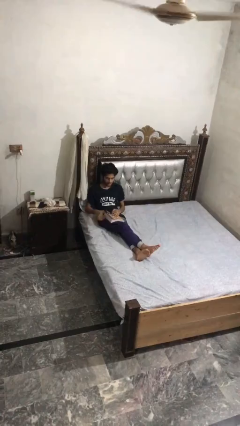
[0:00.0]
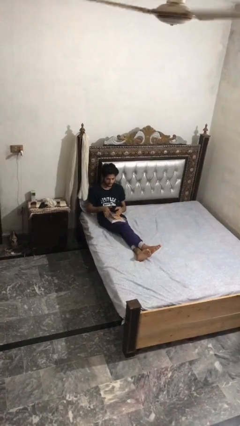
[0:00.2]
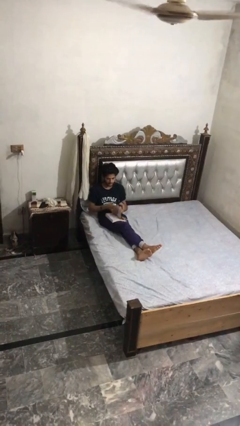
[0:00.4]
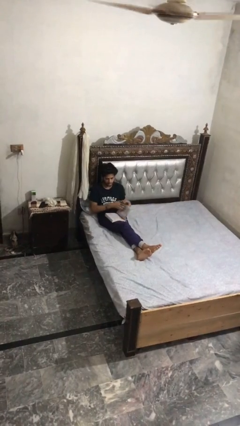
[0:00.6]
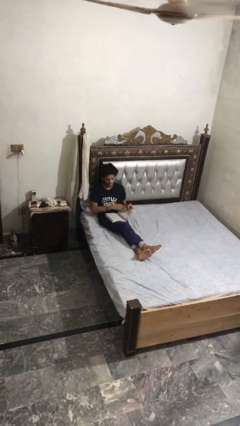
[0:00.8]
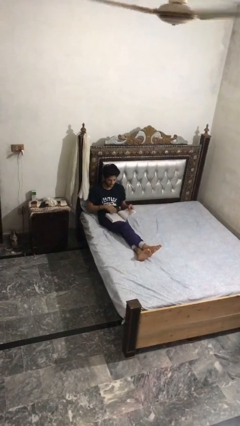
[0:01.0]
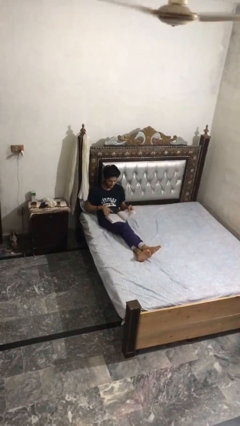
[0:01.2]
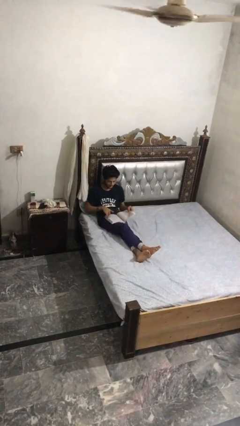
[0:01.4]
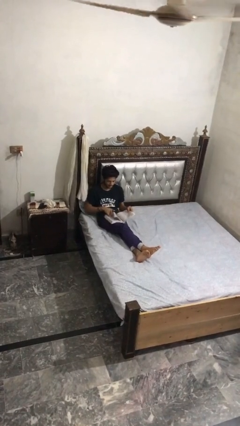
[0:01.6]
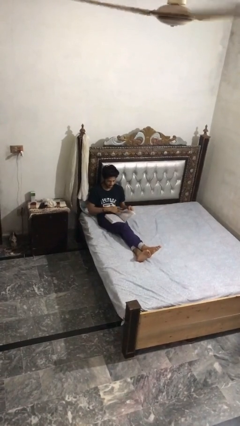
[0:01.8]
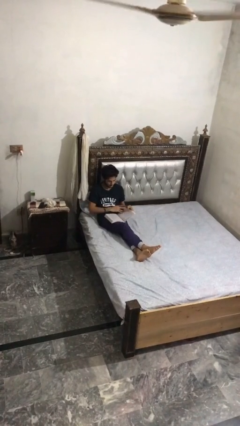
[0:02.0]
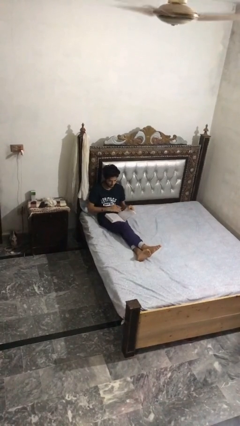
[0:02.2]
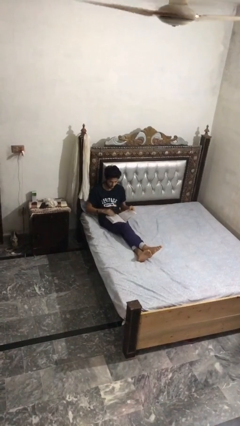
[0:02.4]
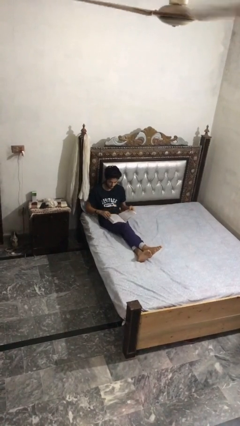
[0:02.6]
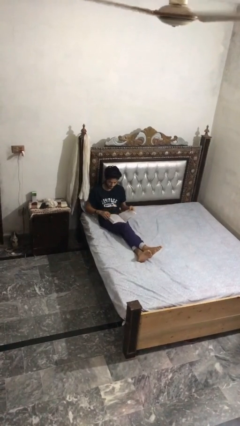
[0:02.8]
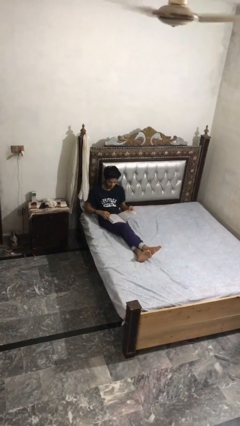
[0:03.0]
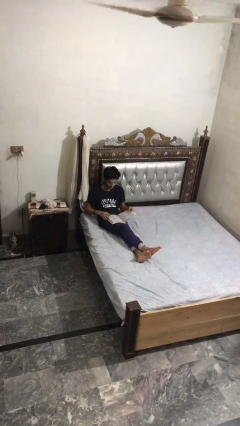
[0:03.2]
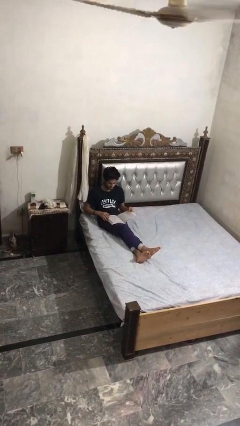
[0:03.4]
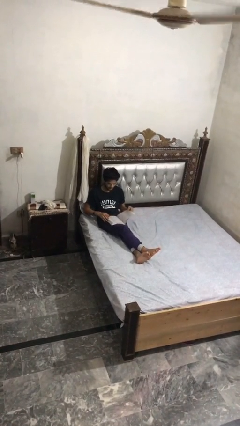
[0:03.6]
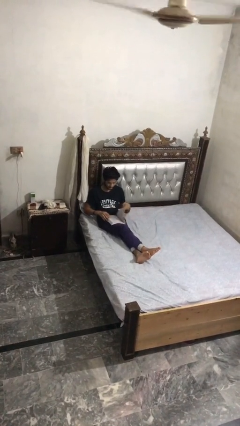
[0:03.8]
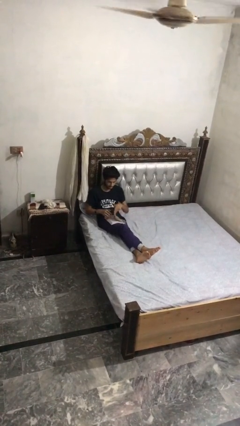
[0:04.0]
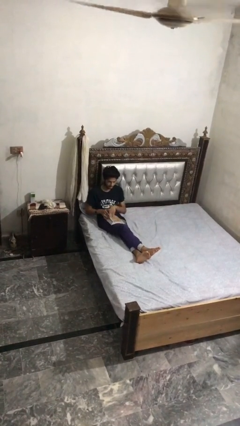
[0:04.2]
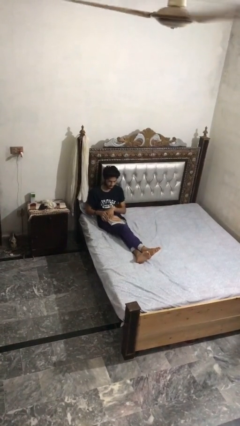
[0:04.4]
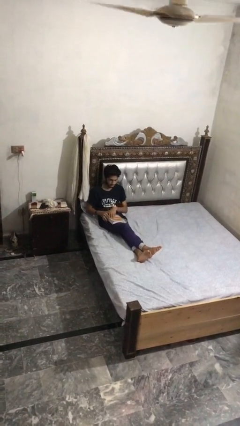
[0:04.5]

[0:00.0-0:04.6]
person reads book

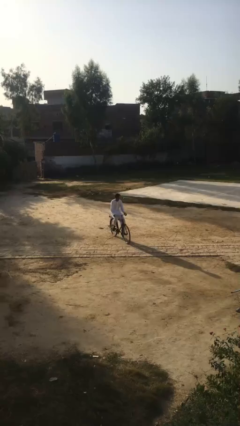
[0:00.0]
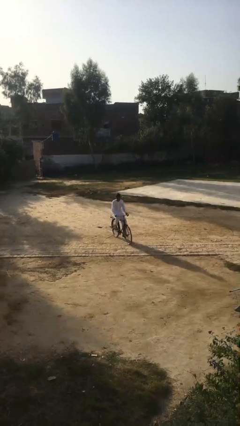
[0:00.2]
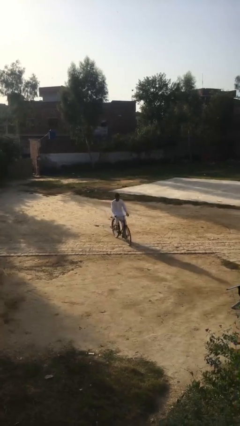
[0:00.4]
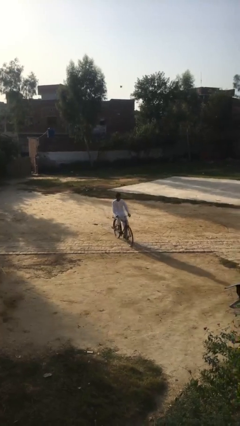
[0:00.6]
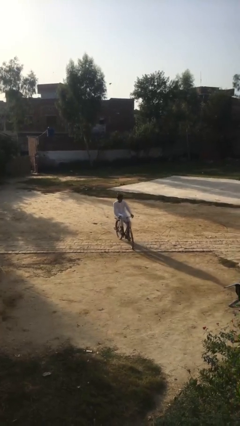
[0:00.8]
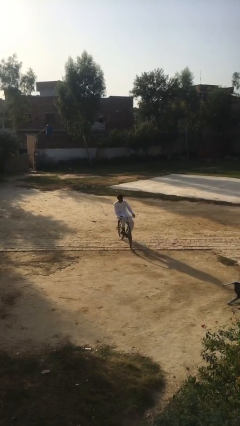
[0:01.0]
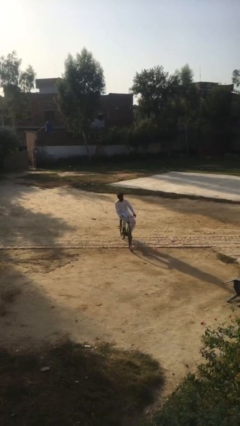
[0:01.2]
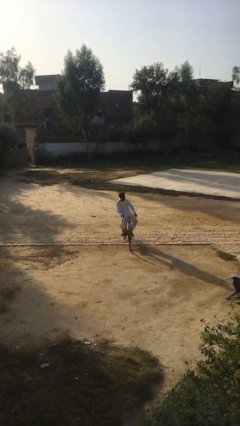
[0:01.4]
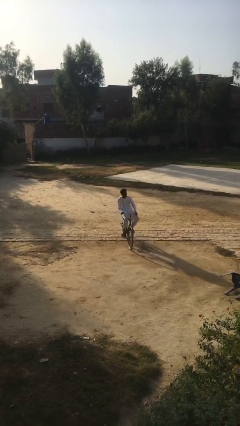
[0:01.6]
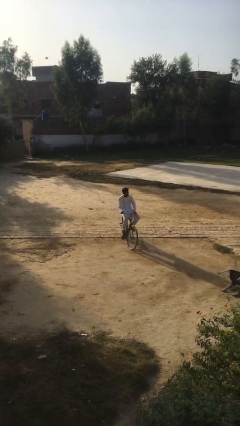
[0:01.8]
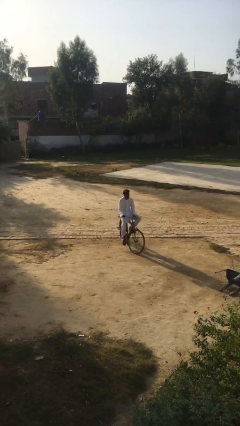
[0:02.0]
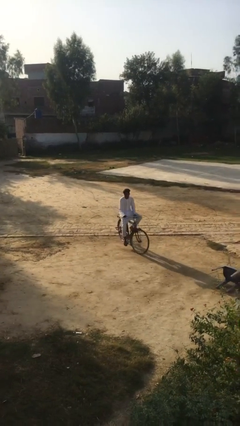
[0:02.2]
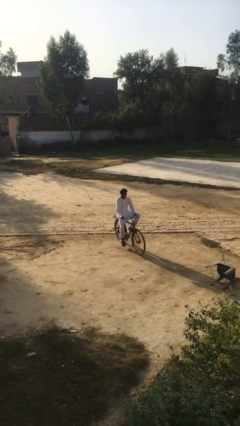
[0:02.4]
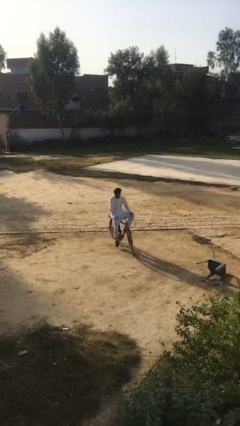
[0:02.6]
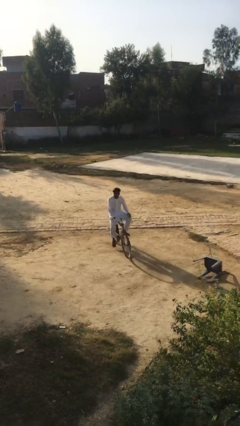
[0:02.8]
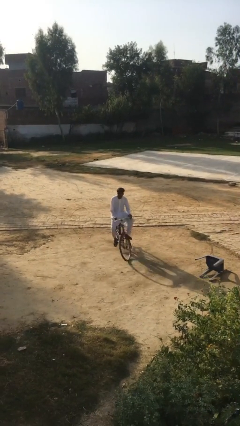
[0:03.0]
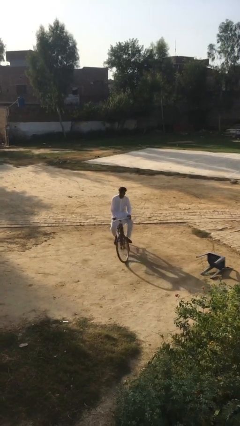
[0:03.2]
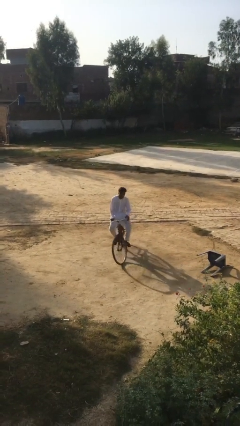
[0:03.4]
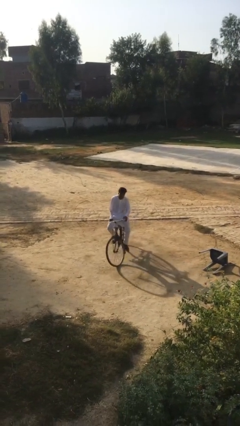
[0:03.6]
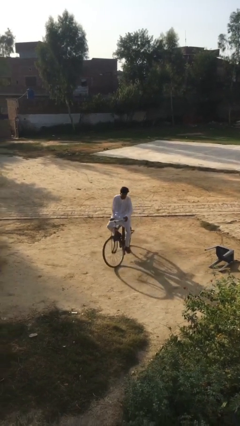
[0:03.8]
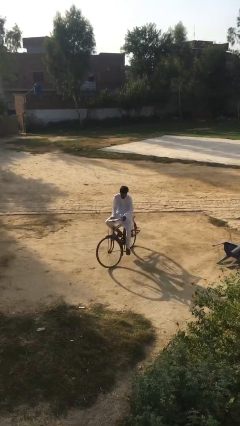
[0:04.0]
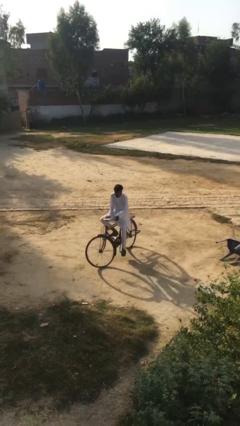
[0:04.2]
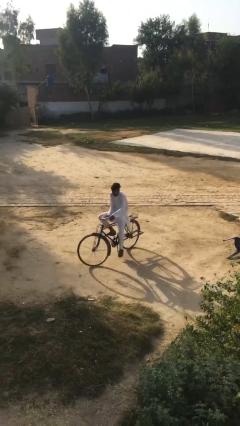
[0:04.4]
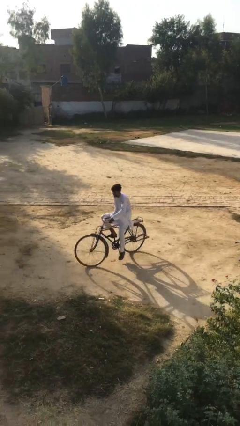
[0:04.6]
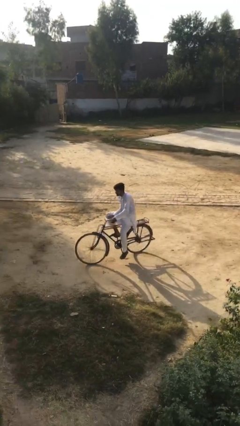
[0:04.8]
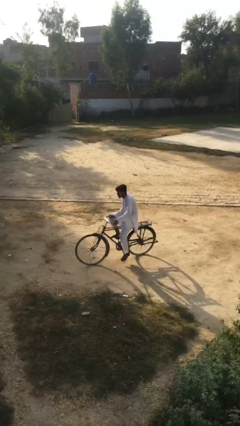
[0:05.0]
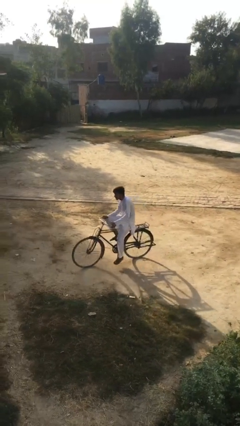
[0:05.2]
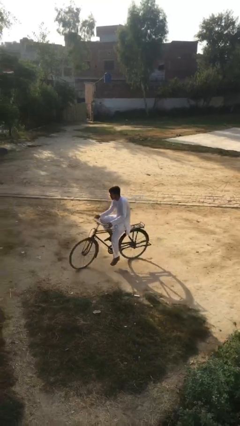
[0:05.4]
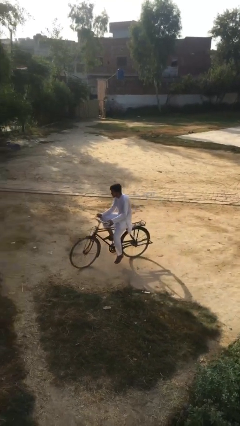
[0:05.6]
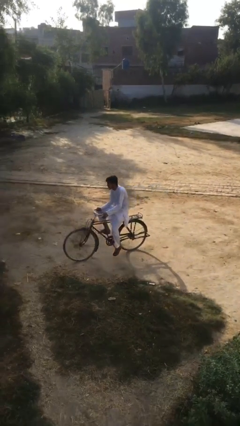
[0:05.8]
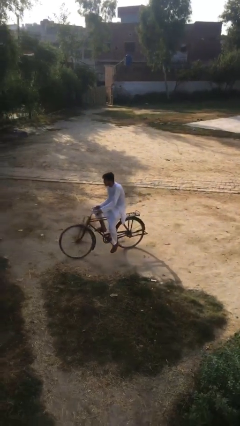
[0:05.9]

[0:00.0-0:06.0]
person rides bicycle

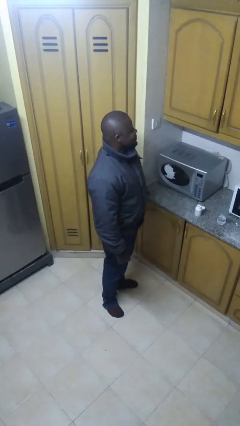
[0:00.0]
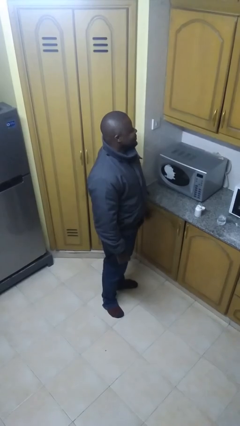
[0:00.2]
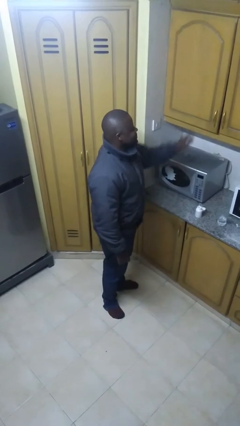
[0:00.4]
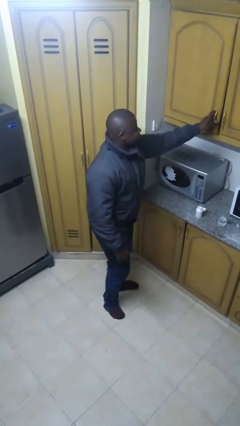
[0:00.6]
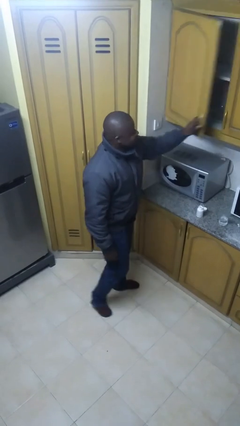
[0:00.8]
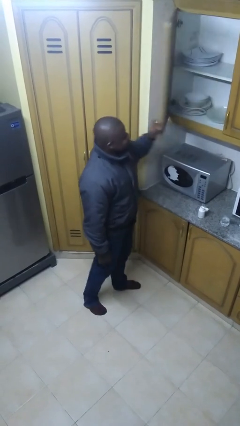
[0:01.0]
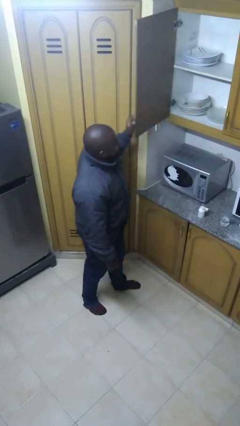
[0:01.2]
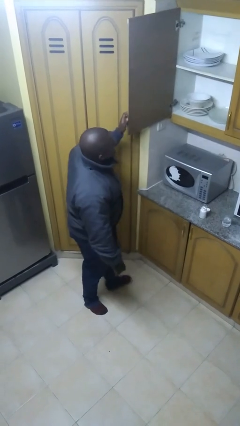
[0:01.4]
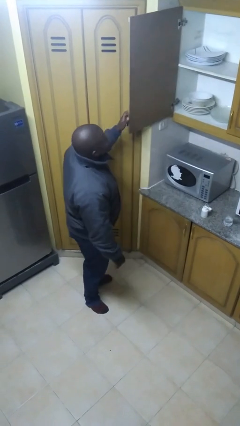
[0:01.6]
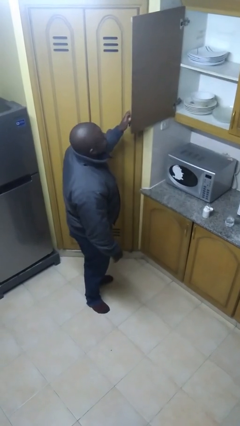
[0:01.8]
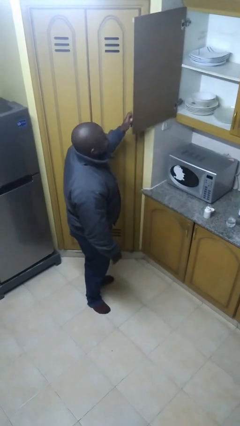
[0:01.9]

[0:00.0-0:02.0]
person closes cabinet

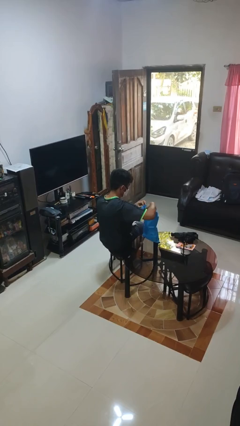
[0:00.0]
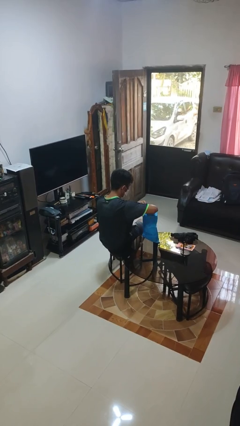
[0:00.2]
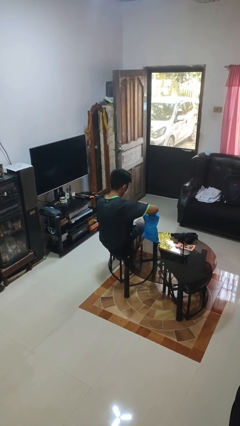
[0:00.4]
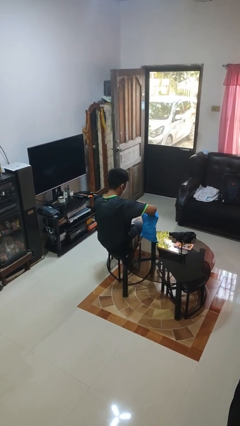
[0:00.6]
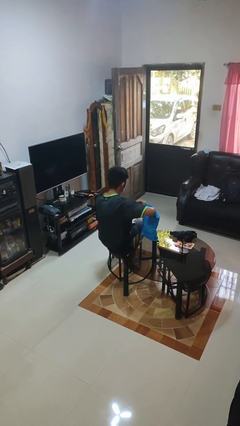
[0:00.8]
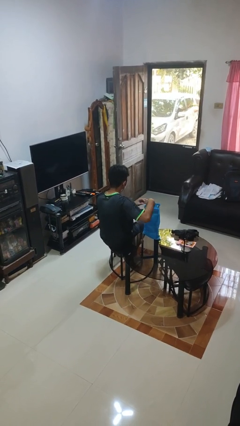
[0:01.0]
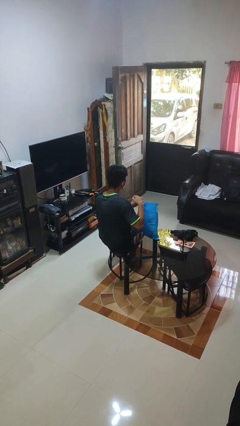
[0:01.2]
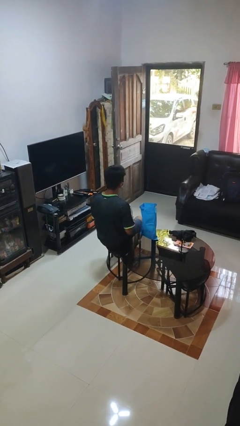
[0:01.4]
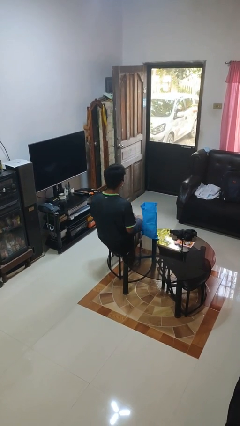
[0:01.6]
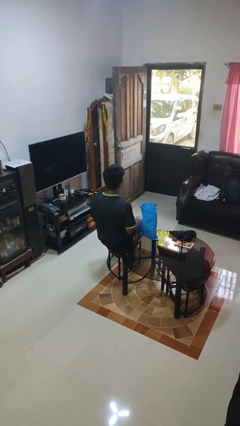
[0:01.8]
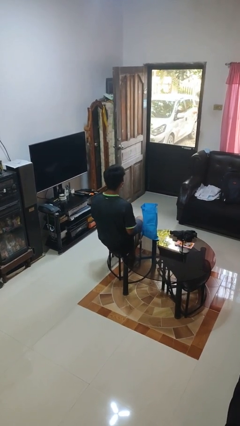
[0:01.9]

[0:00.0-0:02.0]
person puts object into bag

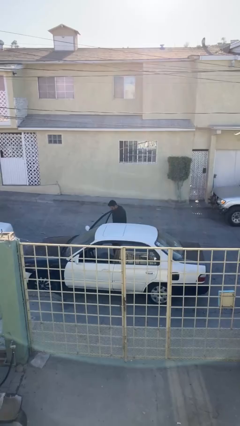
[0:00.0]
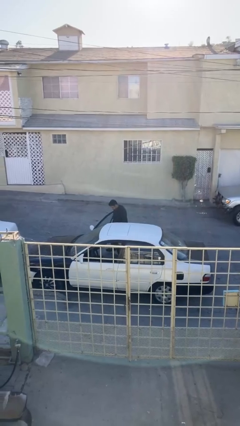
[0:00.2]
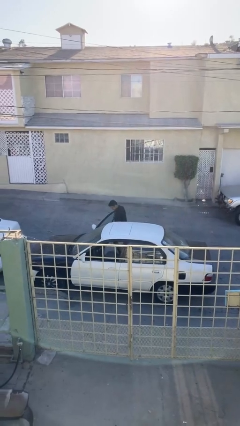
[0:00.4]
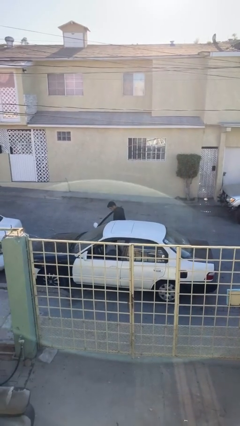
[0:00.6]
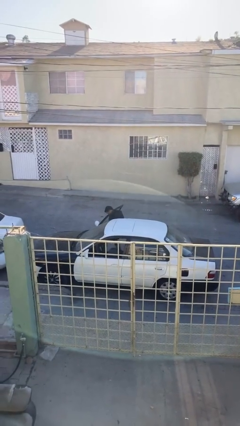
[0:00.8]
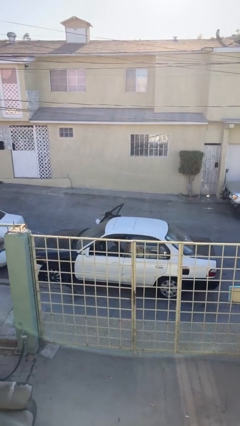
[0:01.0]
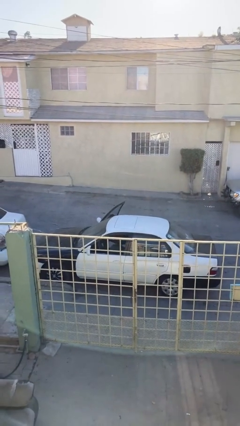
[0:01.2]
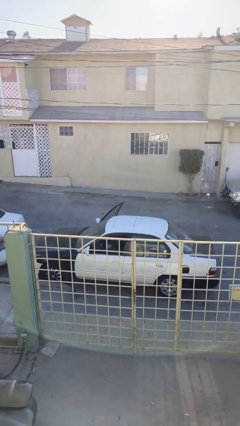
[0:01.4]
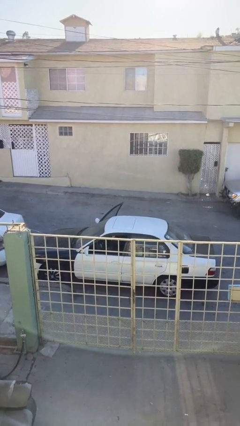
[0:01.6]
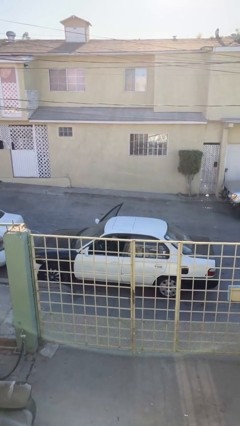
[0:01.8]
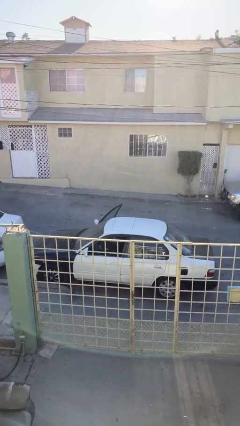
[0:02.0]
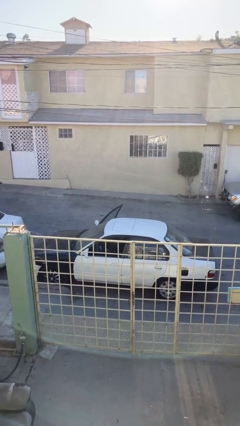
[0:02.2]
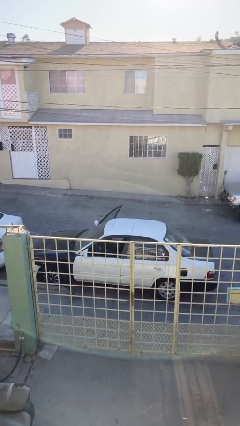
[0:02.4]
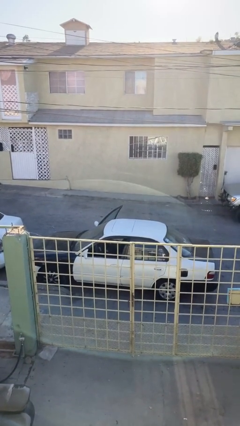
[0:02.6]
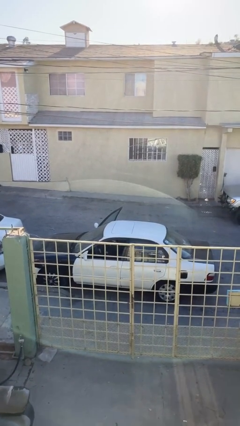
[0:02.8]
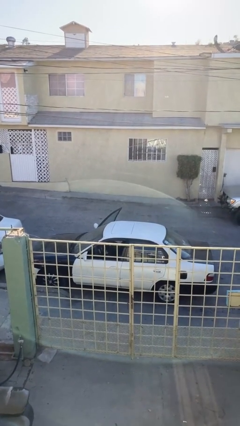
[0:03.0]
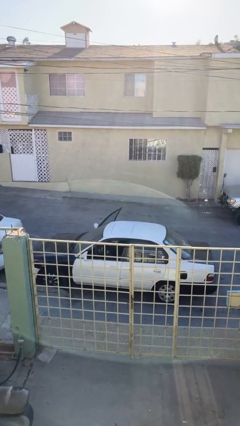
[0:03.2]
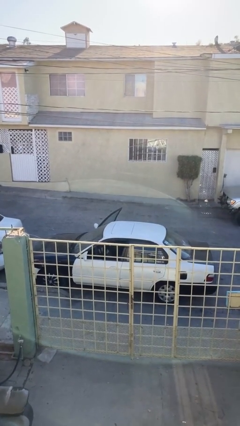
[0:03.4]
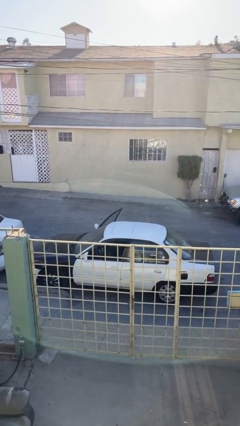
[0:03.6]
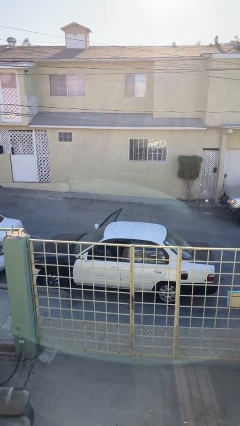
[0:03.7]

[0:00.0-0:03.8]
person enters car
